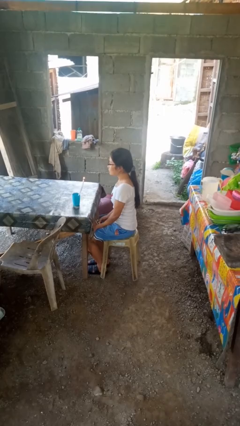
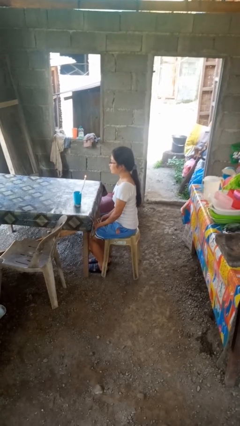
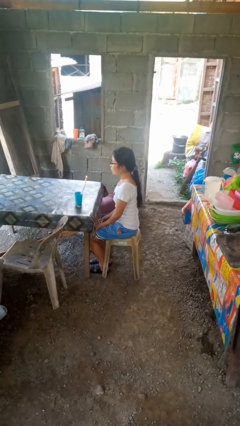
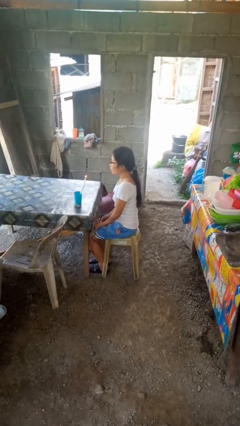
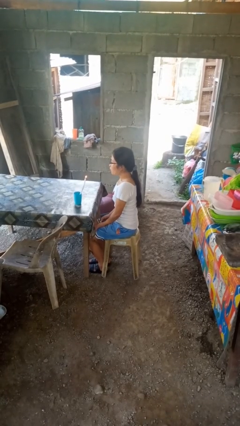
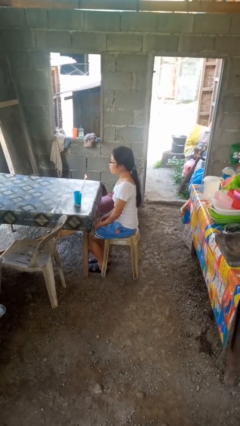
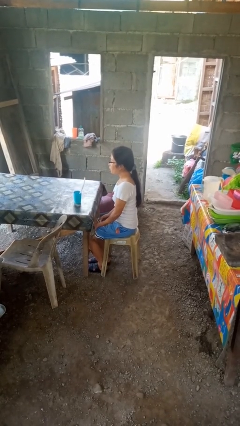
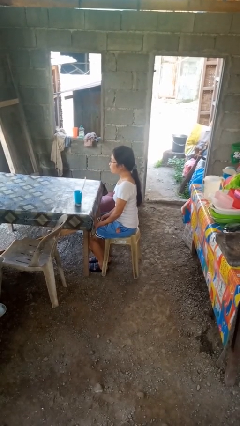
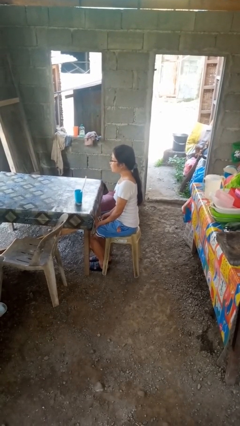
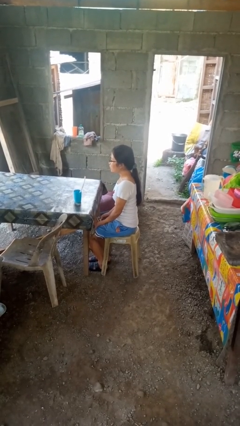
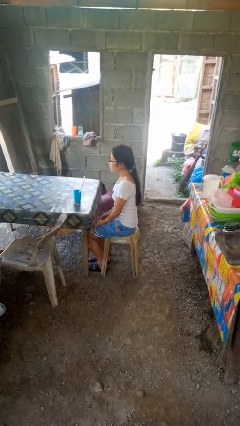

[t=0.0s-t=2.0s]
person extinguishes candle

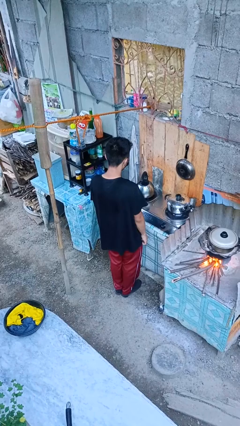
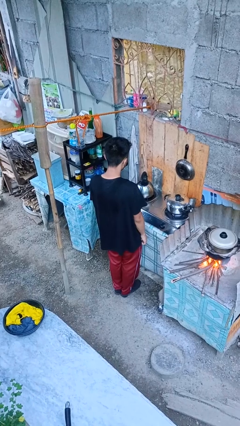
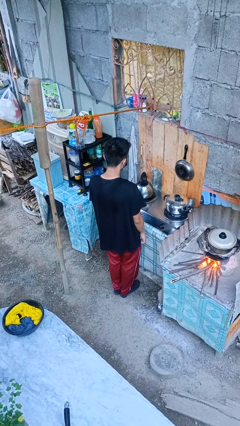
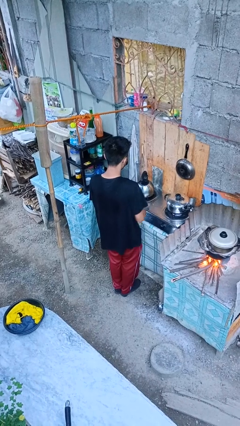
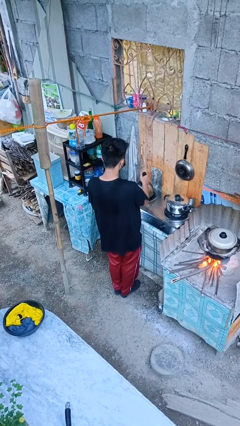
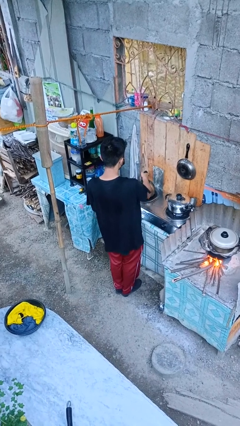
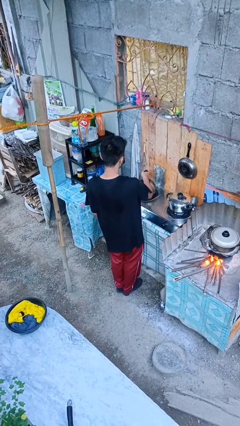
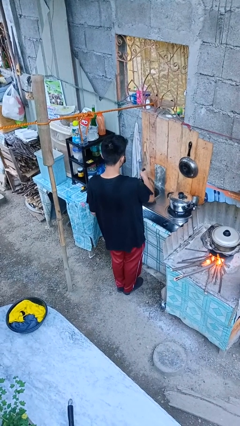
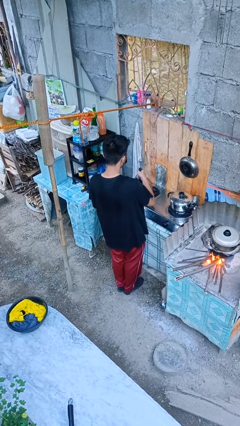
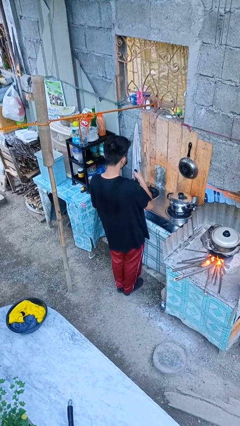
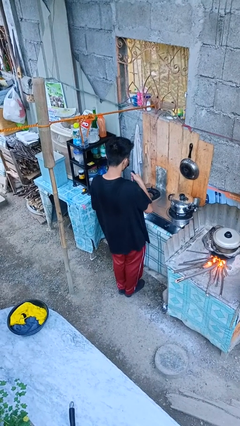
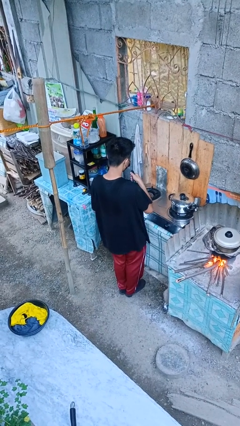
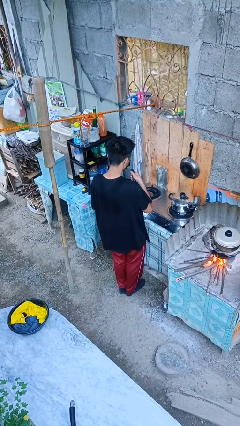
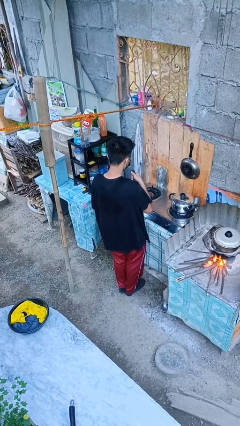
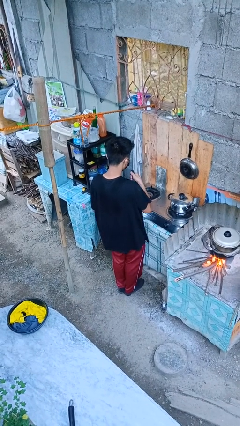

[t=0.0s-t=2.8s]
person picks up object from countertop

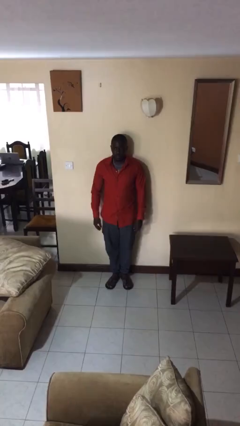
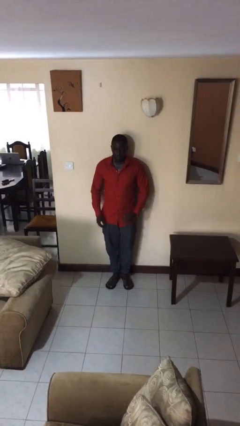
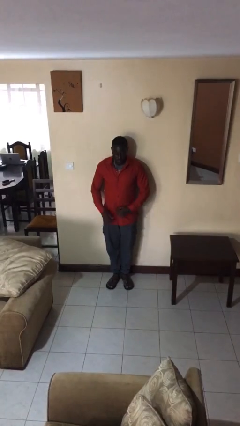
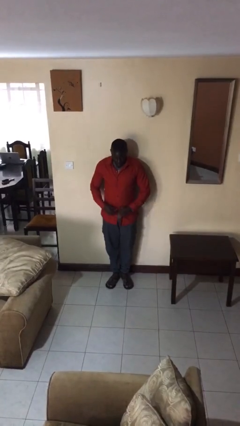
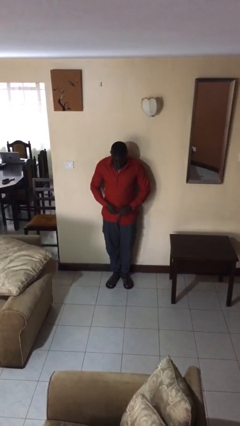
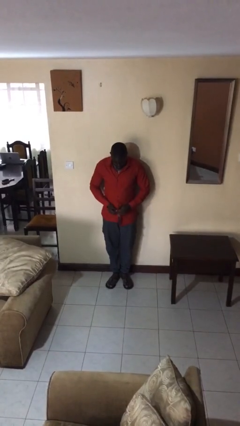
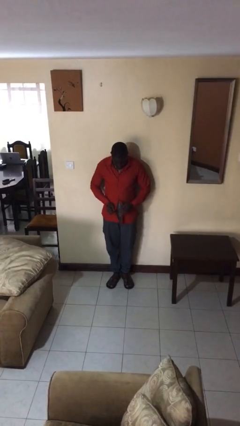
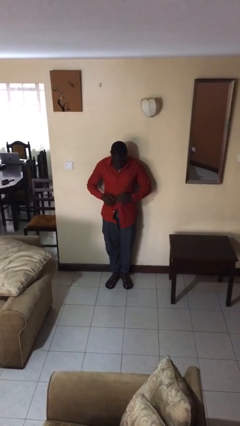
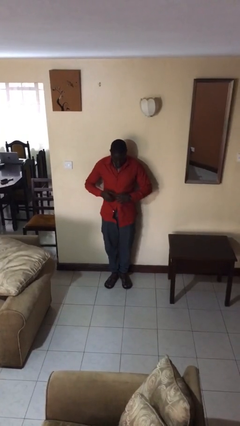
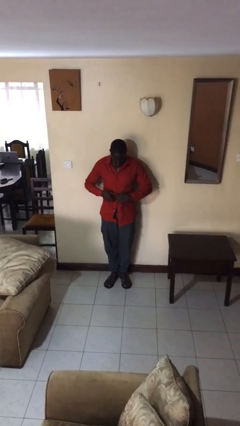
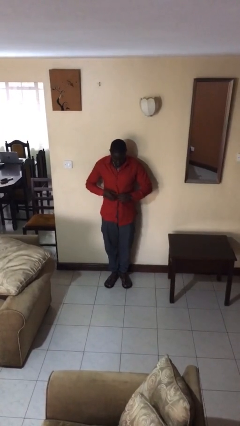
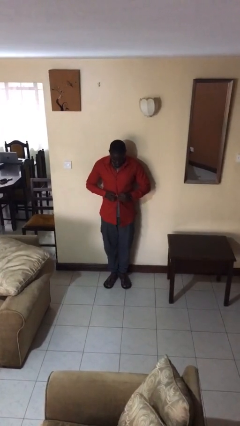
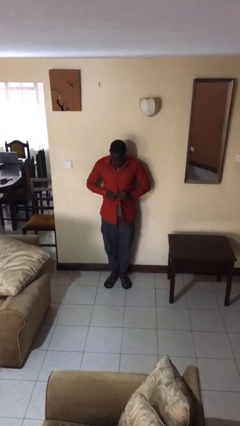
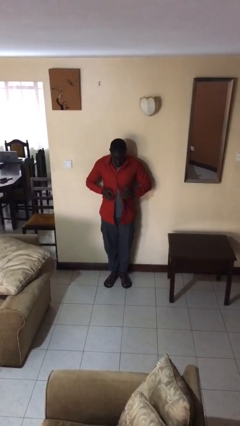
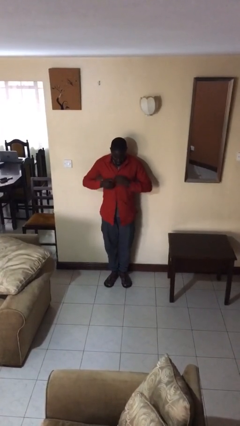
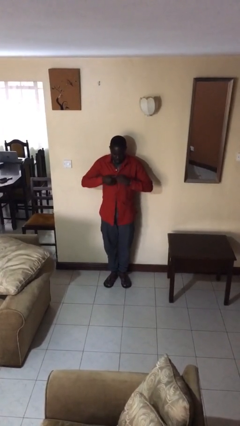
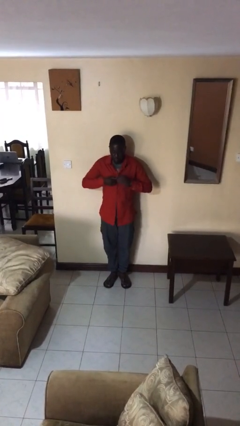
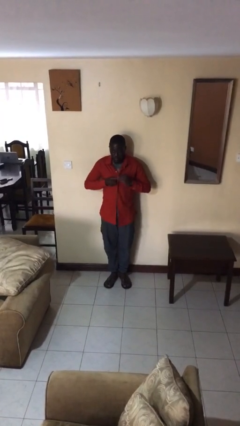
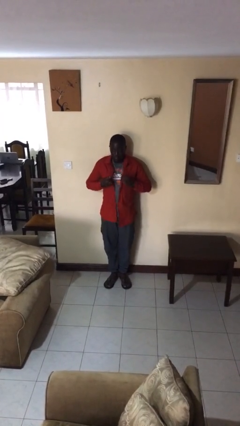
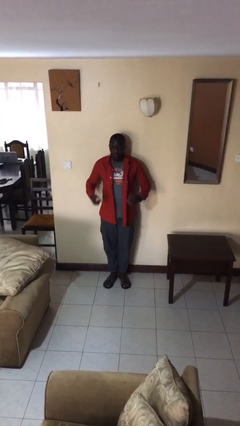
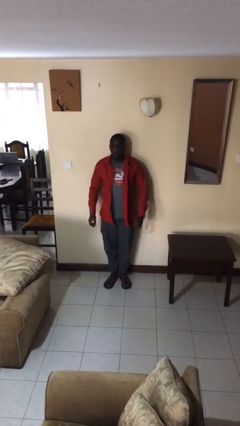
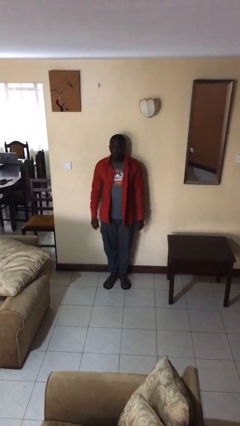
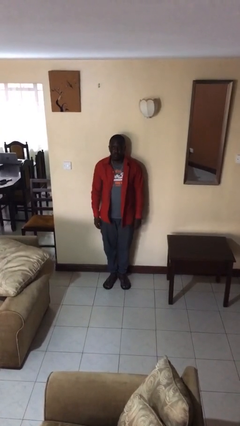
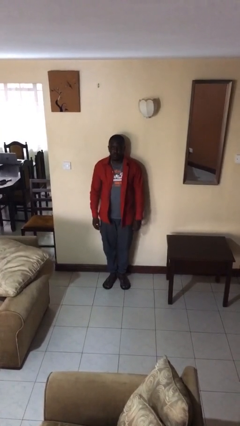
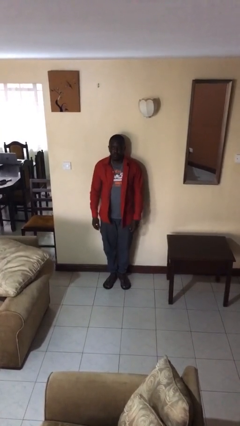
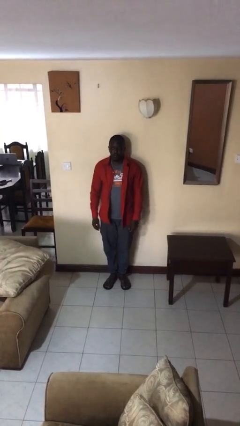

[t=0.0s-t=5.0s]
person unbuttons shirt

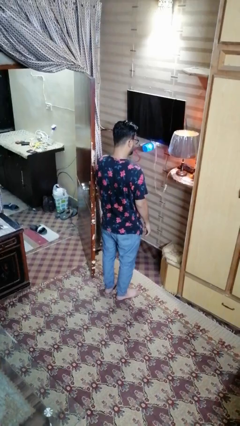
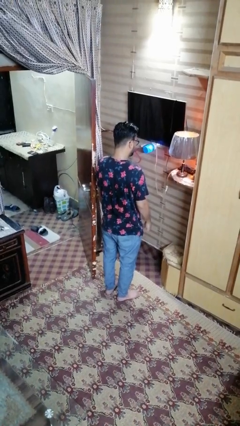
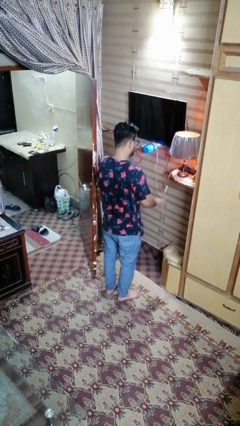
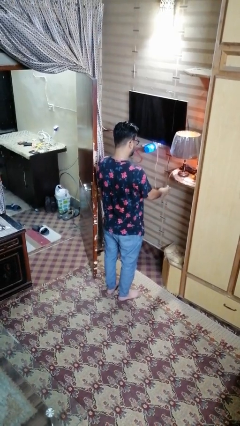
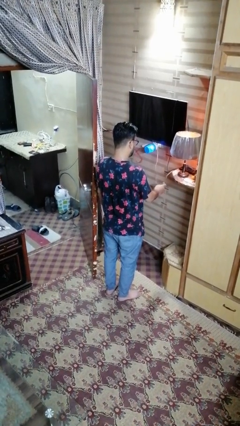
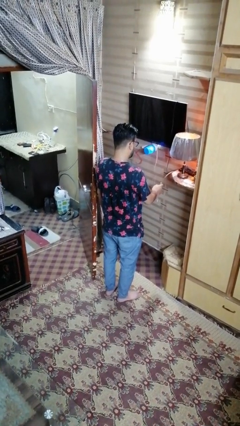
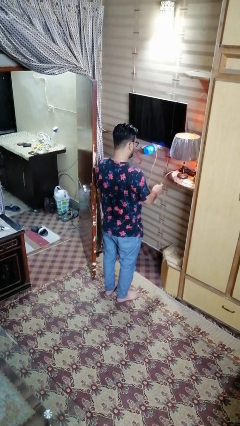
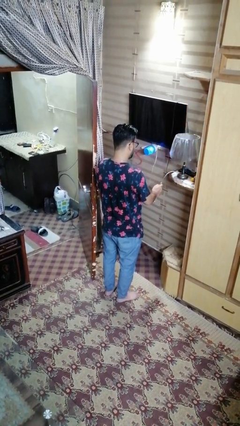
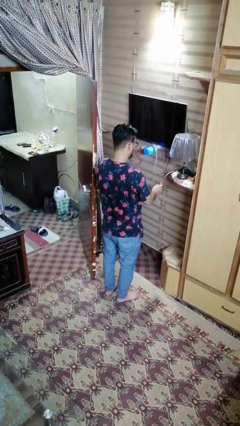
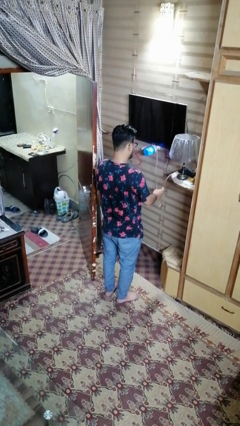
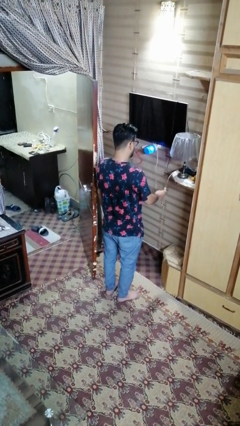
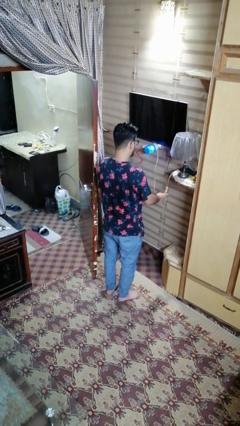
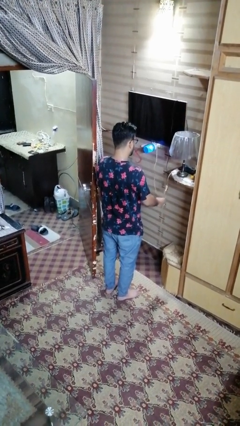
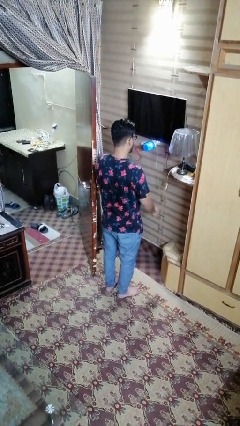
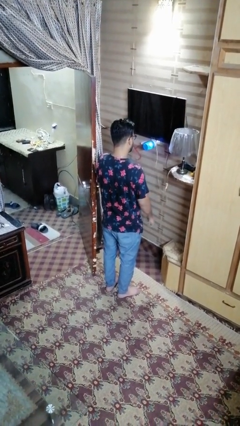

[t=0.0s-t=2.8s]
person turns off lamp

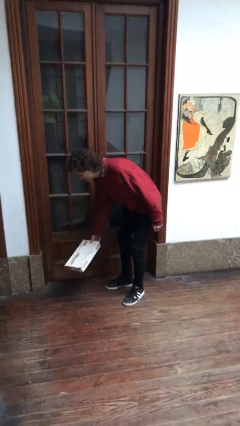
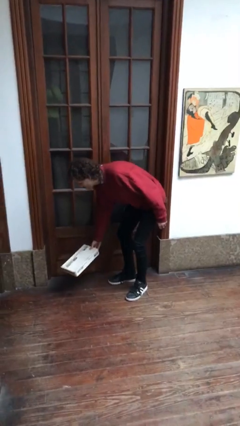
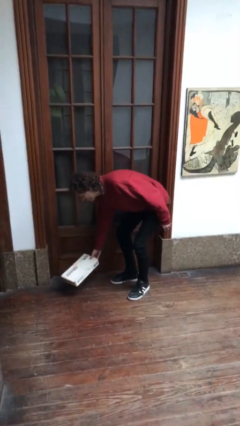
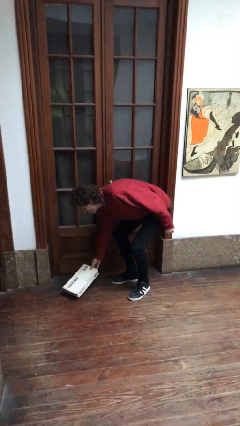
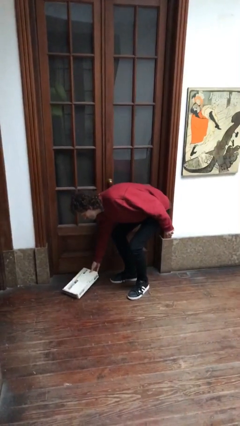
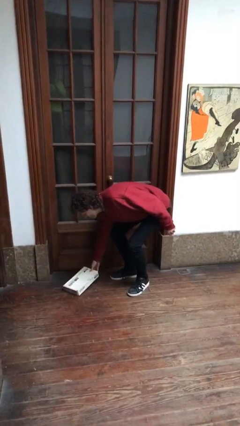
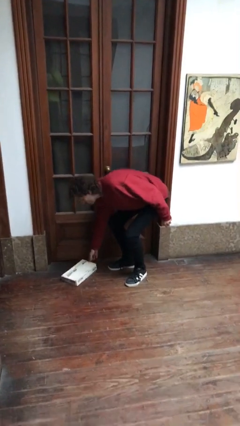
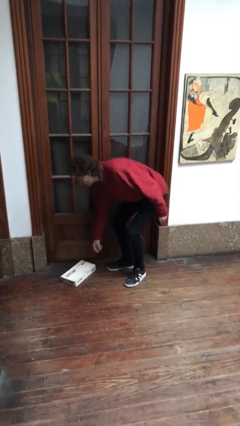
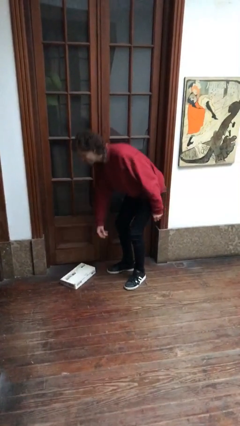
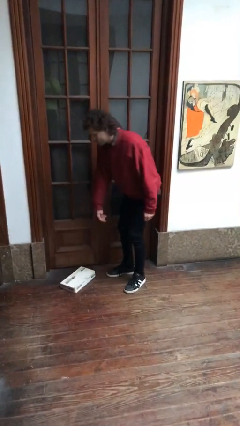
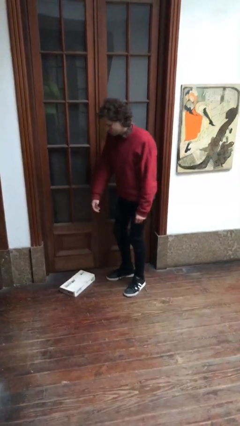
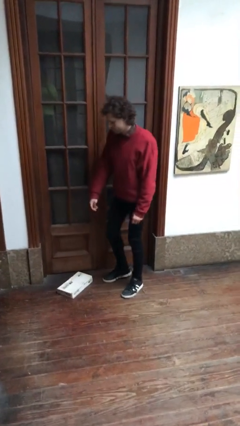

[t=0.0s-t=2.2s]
person puts down object on floor

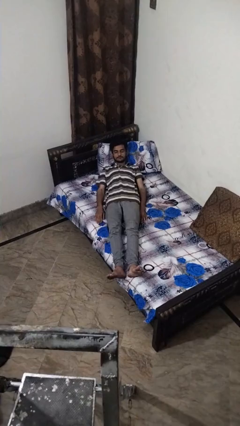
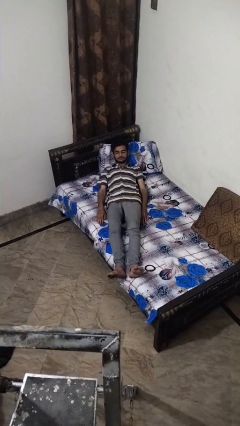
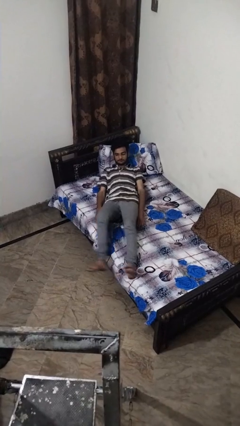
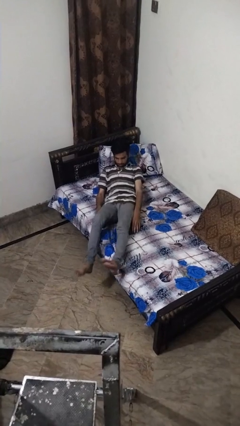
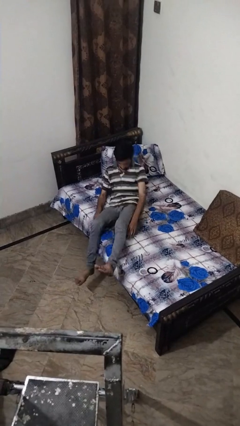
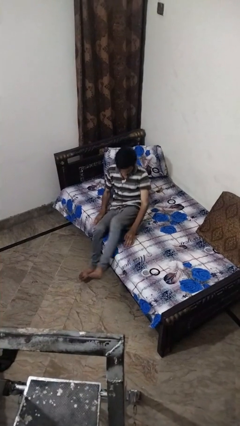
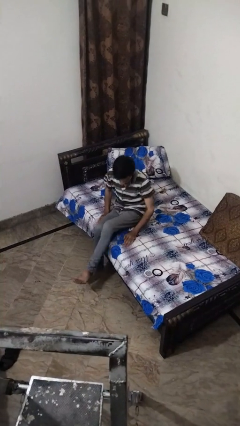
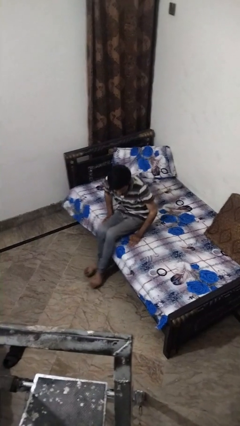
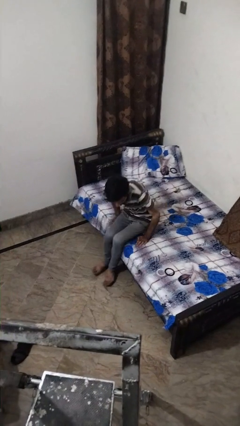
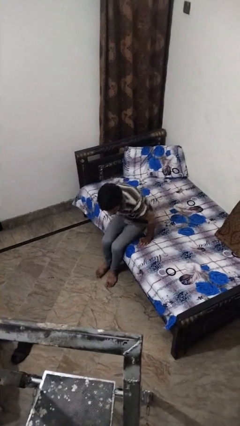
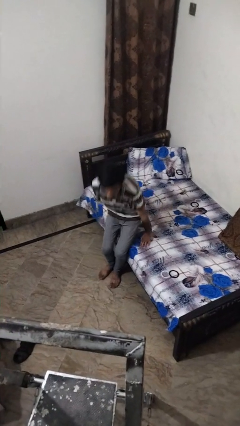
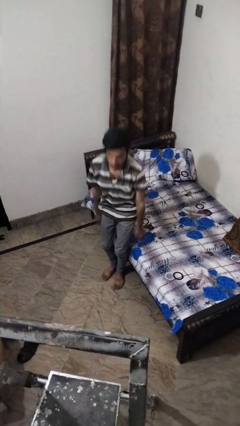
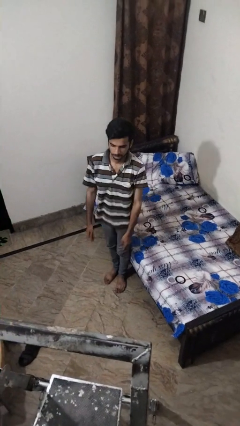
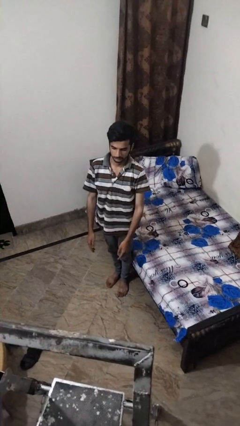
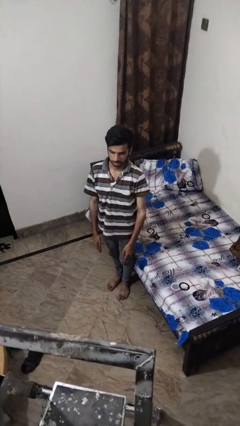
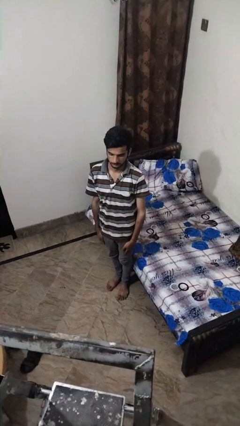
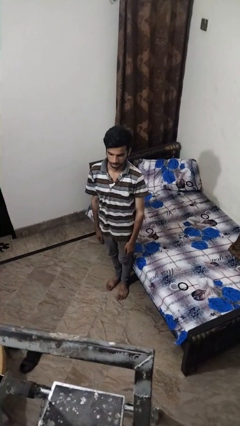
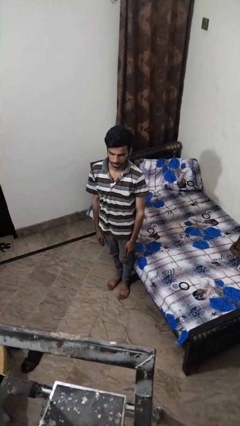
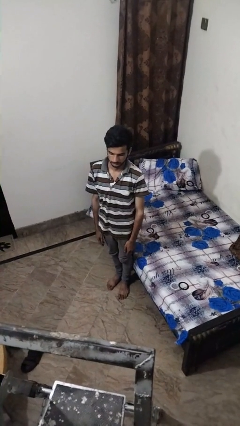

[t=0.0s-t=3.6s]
person stands up
